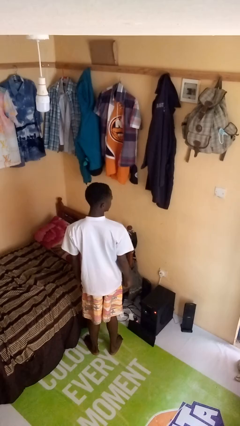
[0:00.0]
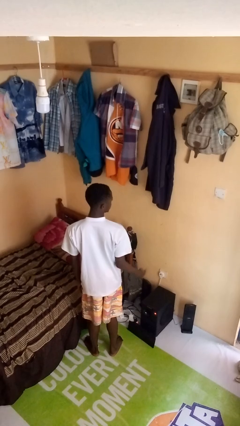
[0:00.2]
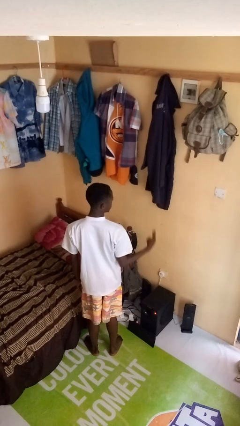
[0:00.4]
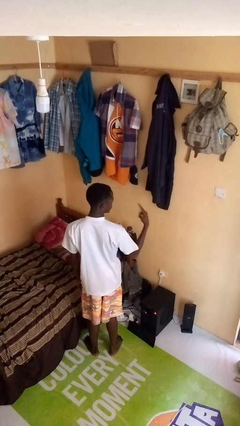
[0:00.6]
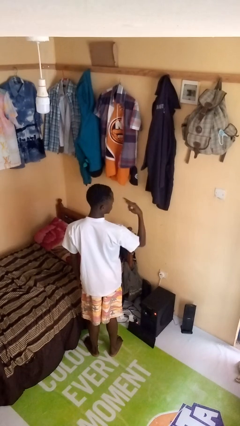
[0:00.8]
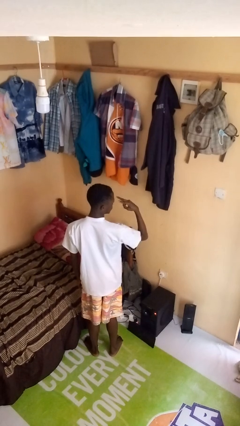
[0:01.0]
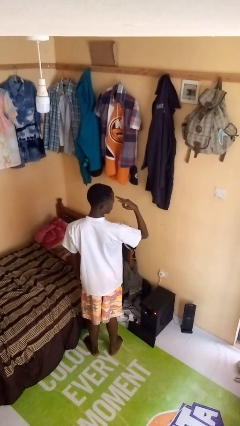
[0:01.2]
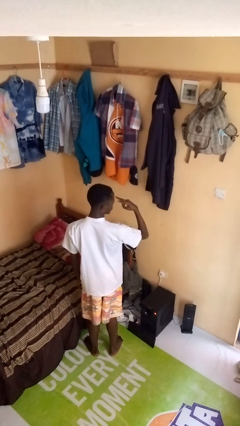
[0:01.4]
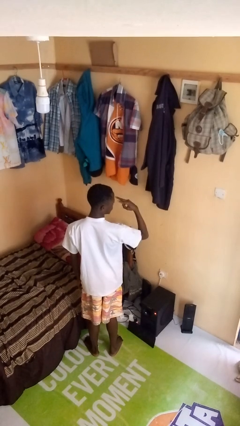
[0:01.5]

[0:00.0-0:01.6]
person gestures watch closely

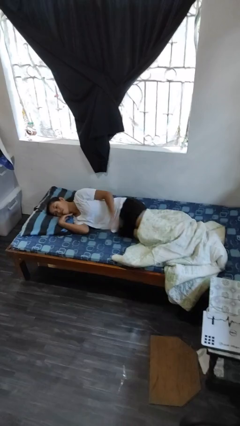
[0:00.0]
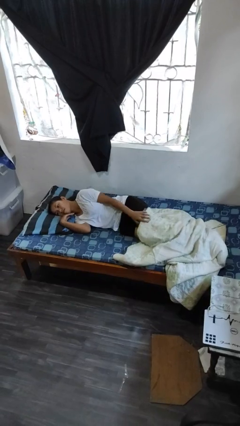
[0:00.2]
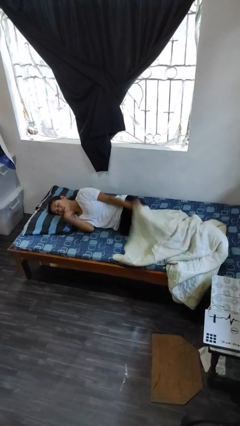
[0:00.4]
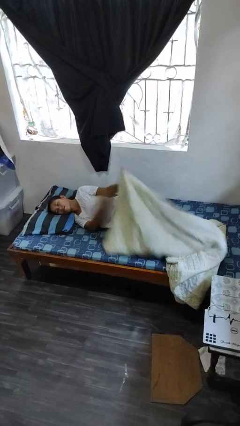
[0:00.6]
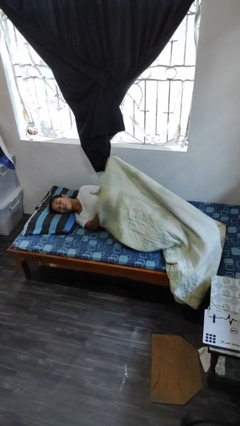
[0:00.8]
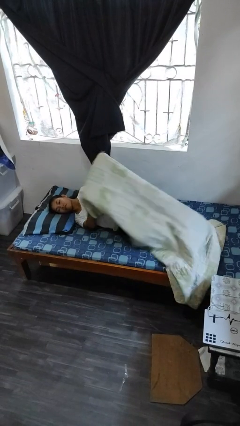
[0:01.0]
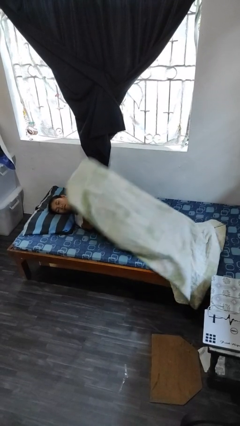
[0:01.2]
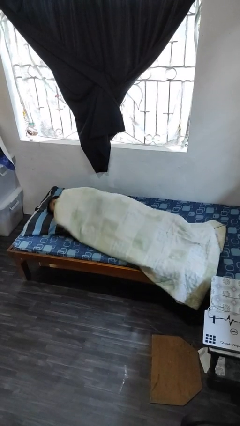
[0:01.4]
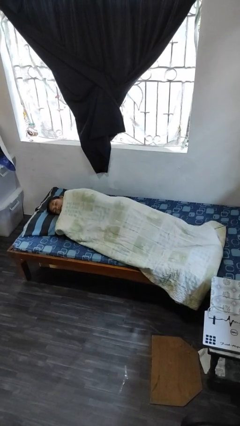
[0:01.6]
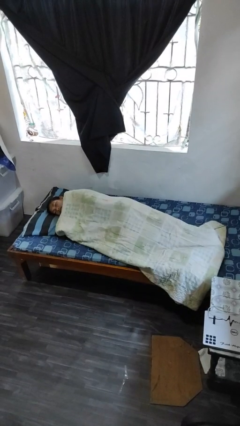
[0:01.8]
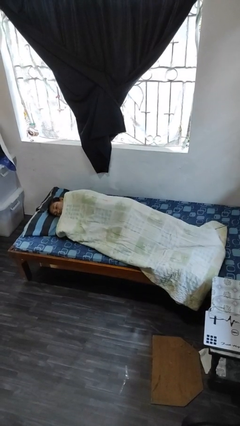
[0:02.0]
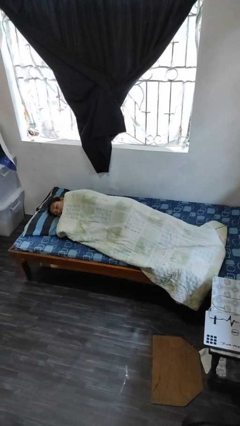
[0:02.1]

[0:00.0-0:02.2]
person covers with bedsheets

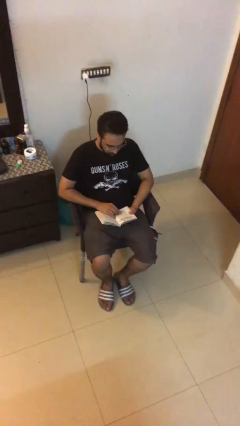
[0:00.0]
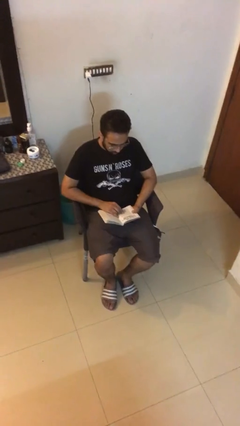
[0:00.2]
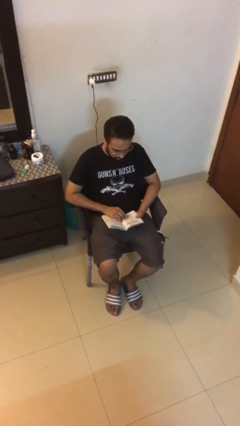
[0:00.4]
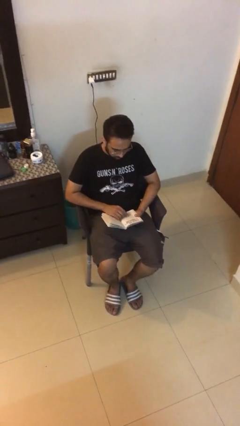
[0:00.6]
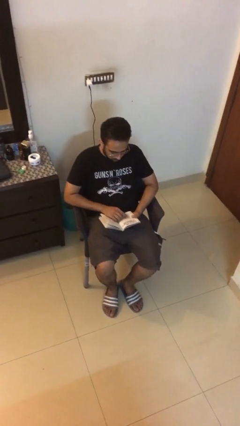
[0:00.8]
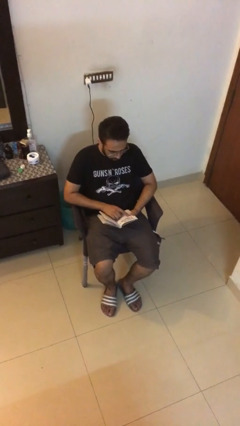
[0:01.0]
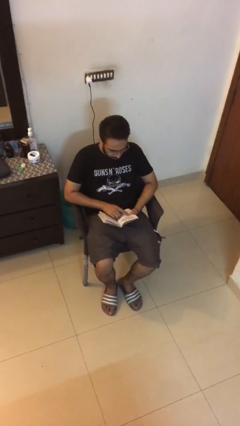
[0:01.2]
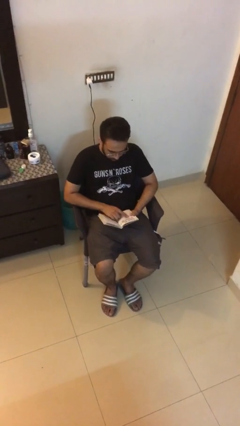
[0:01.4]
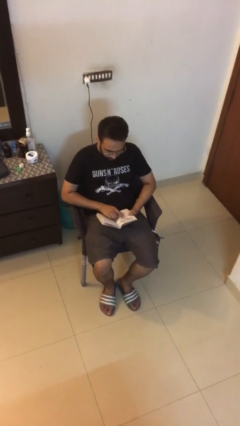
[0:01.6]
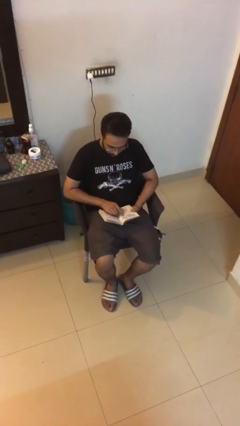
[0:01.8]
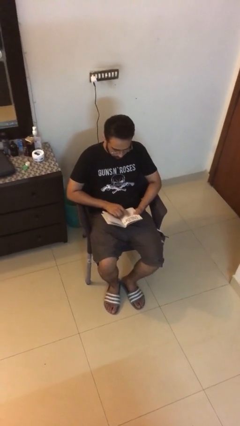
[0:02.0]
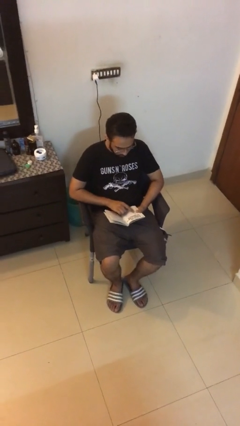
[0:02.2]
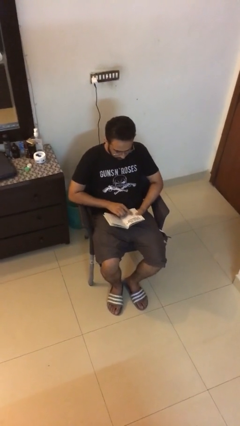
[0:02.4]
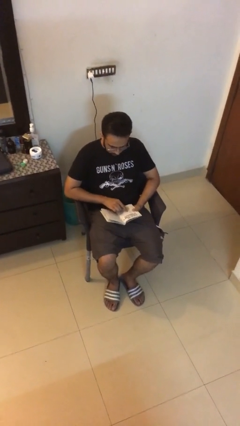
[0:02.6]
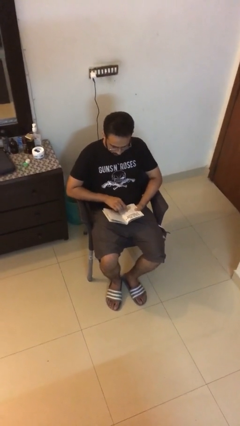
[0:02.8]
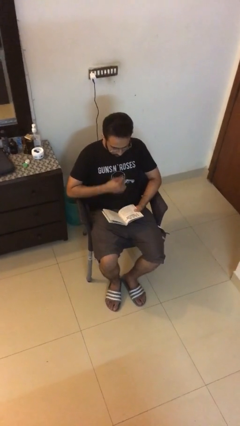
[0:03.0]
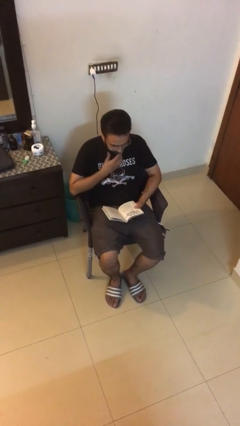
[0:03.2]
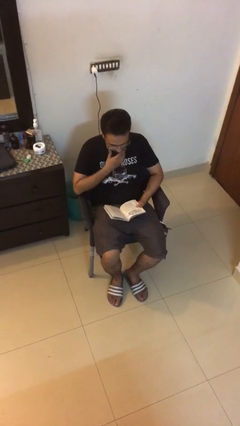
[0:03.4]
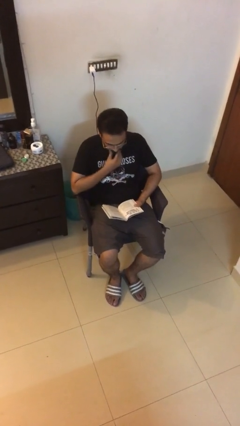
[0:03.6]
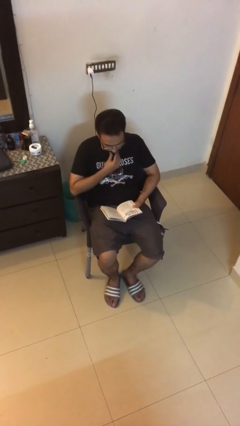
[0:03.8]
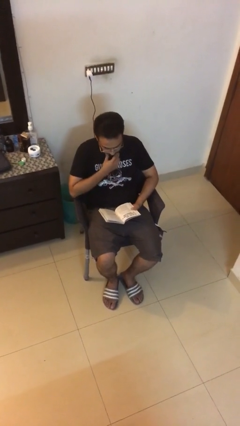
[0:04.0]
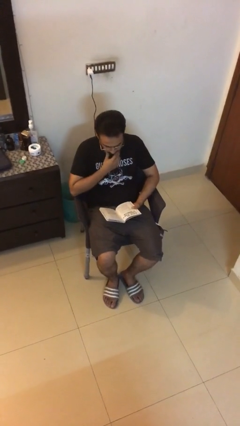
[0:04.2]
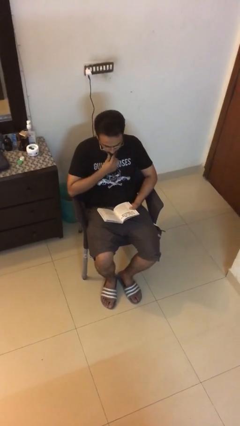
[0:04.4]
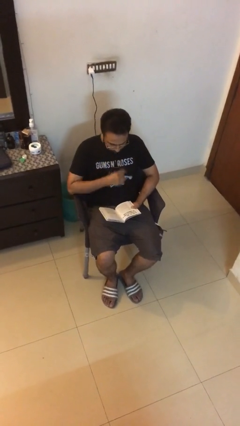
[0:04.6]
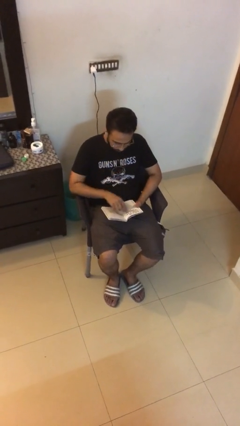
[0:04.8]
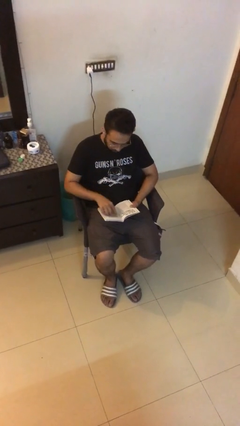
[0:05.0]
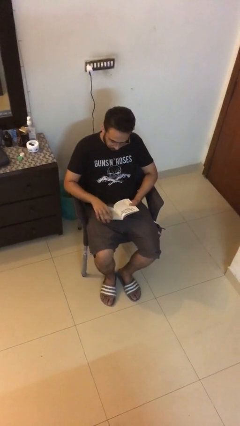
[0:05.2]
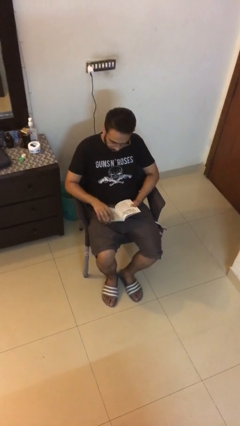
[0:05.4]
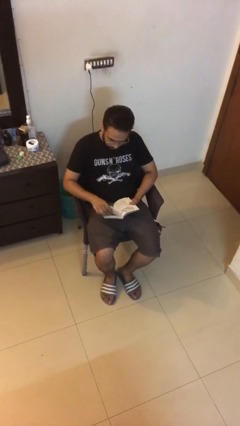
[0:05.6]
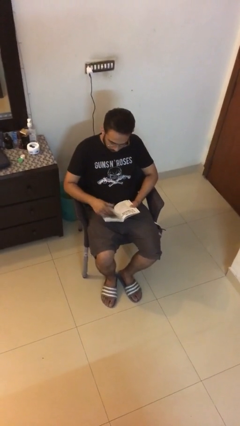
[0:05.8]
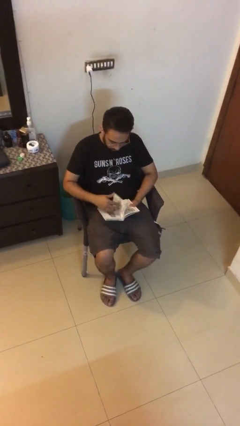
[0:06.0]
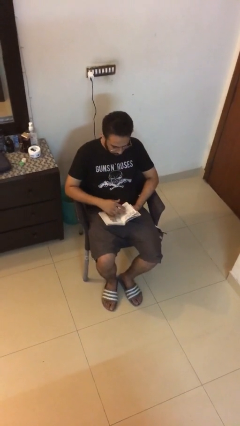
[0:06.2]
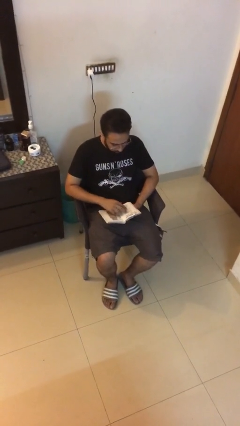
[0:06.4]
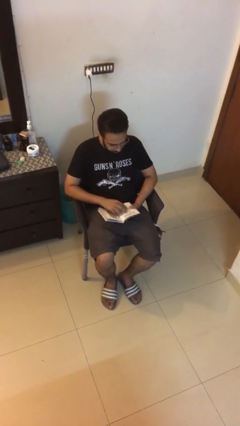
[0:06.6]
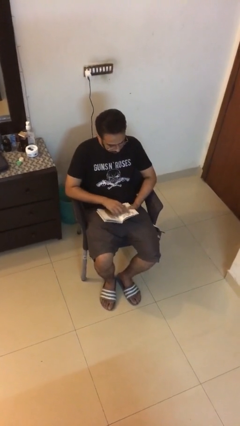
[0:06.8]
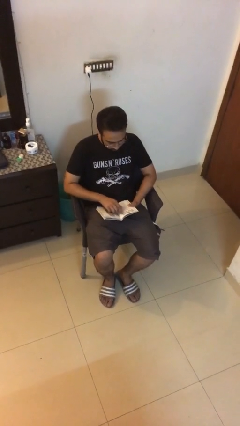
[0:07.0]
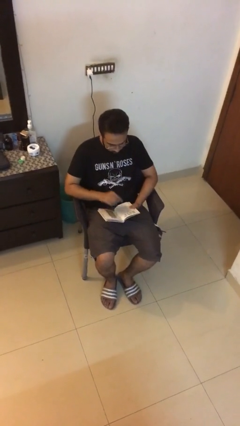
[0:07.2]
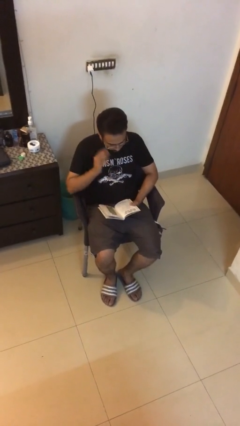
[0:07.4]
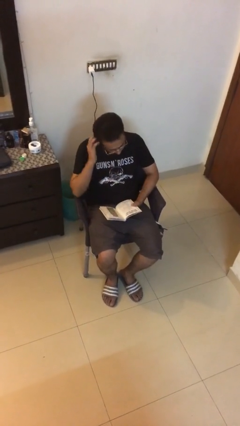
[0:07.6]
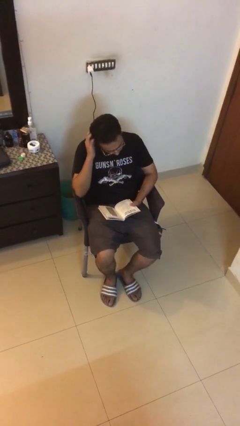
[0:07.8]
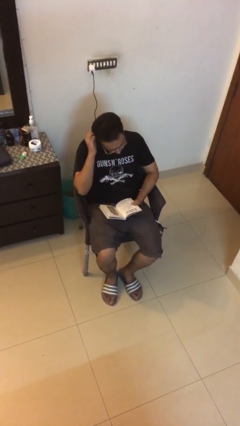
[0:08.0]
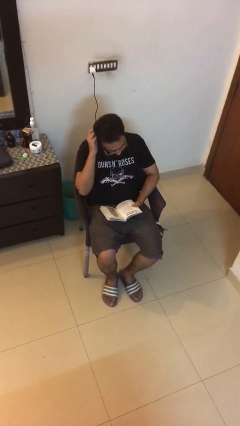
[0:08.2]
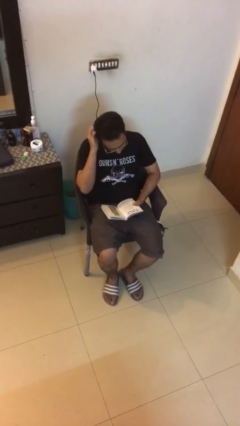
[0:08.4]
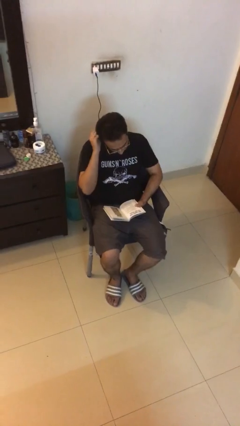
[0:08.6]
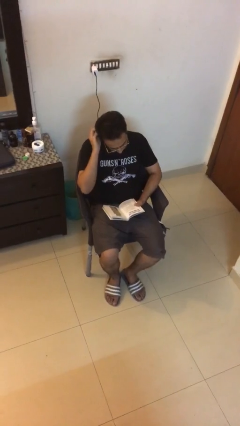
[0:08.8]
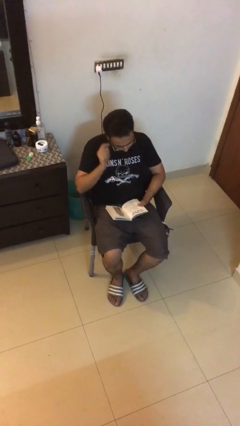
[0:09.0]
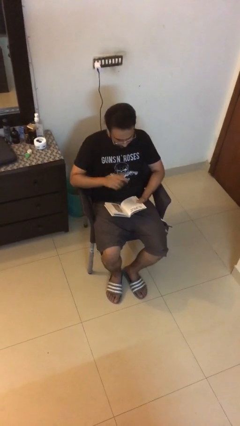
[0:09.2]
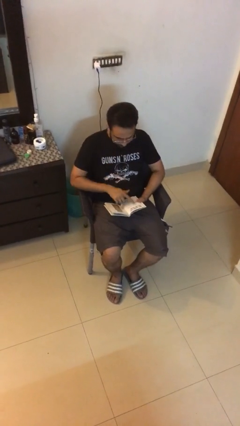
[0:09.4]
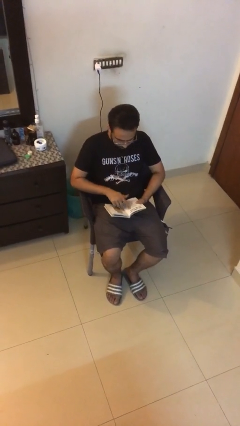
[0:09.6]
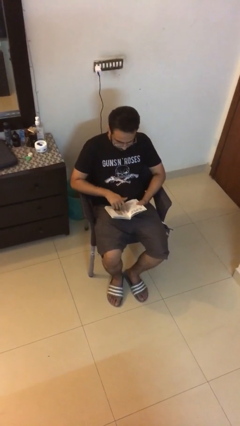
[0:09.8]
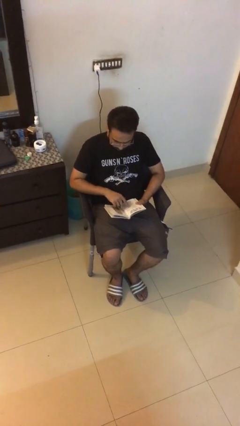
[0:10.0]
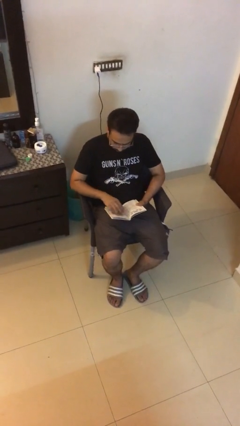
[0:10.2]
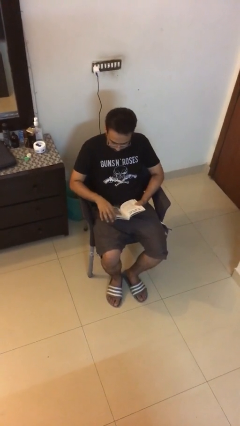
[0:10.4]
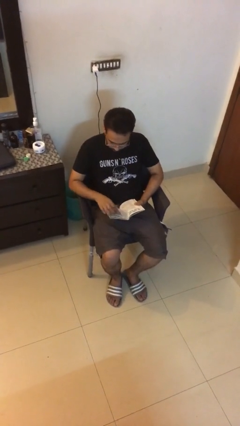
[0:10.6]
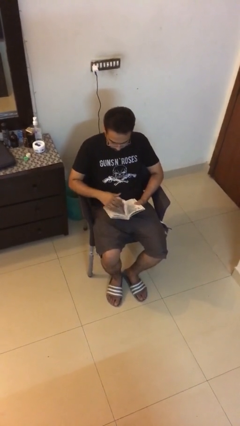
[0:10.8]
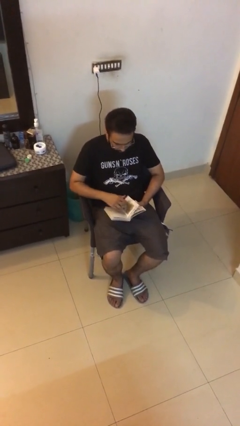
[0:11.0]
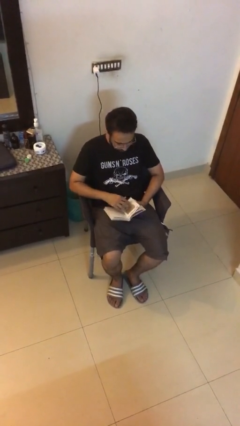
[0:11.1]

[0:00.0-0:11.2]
person reads document

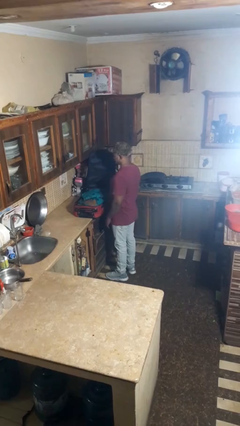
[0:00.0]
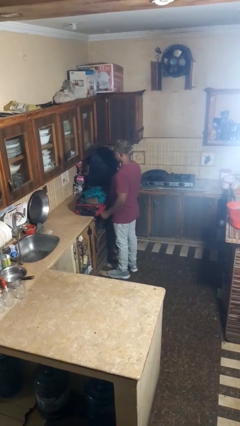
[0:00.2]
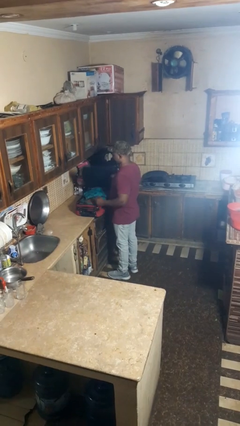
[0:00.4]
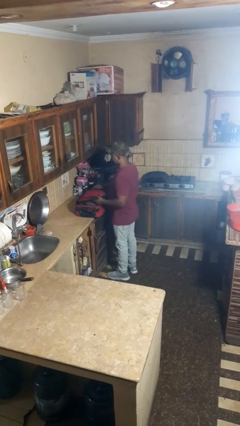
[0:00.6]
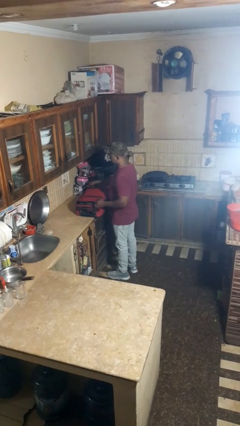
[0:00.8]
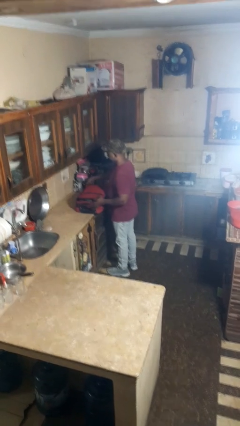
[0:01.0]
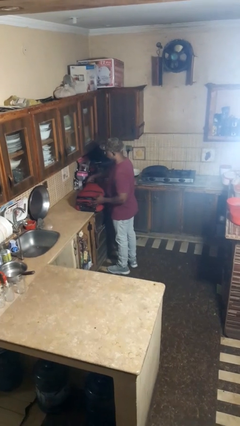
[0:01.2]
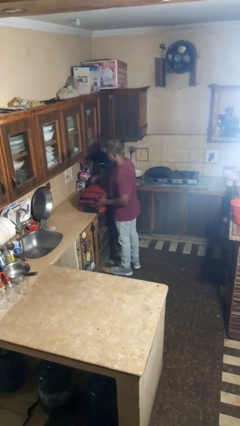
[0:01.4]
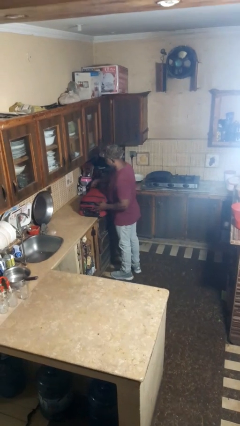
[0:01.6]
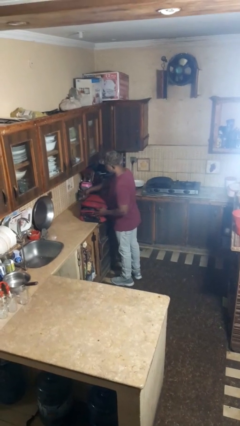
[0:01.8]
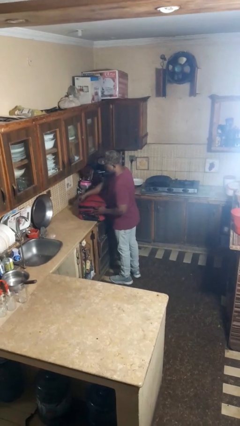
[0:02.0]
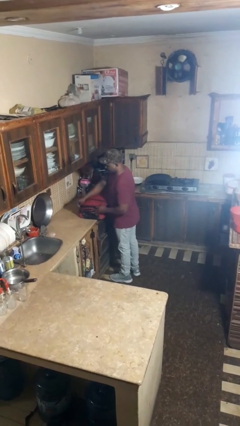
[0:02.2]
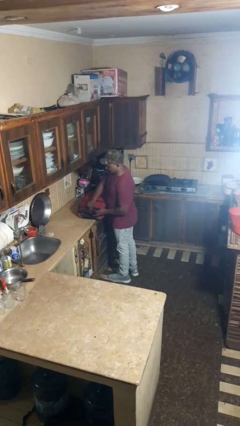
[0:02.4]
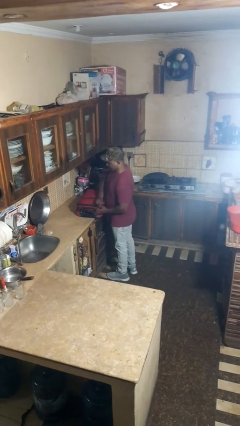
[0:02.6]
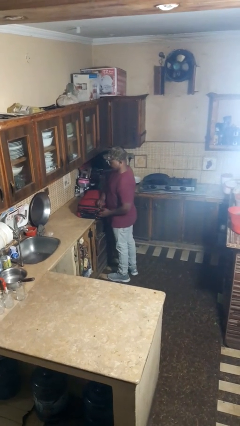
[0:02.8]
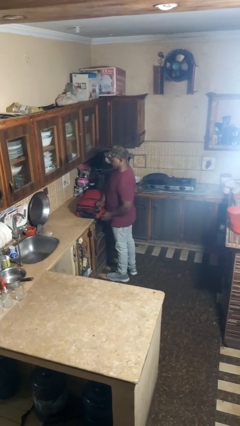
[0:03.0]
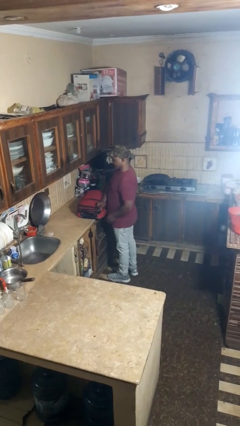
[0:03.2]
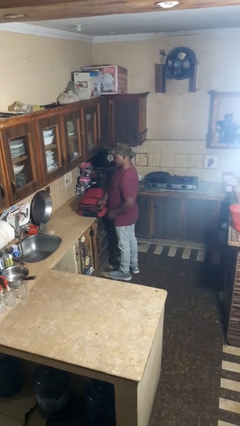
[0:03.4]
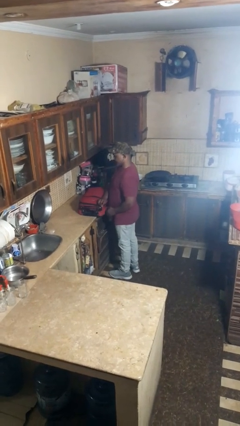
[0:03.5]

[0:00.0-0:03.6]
person closes suitcase
